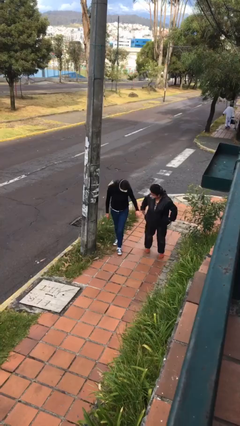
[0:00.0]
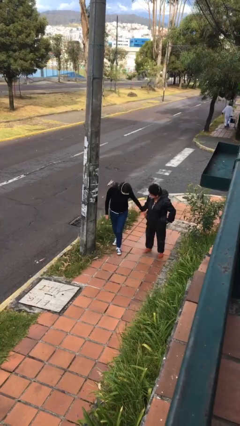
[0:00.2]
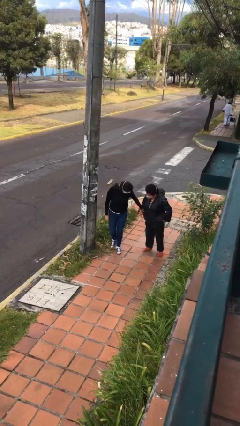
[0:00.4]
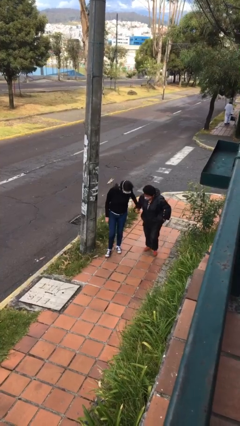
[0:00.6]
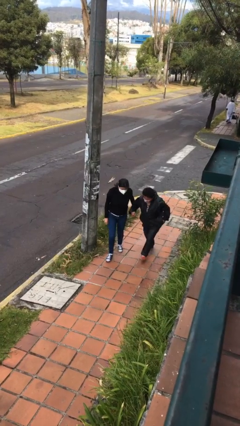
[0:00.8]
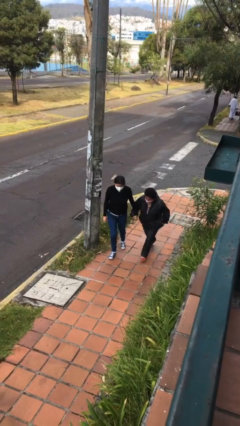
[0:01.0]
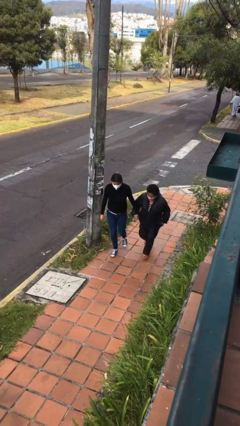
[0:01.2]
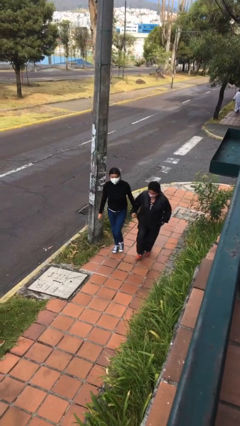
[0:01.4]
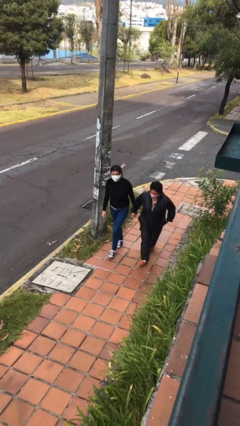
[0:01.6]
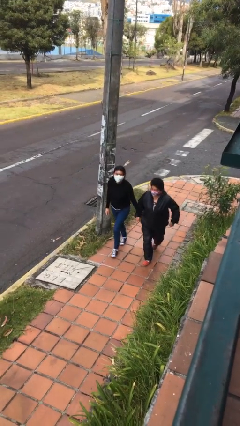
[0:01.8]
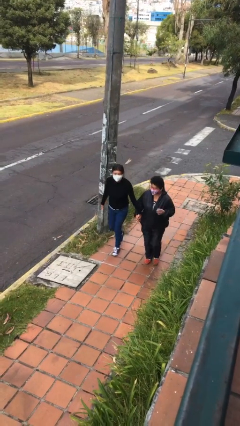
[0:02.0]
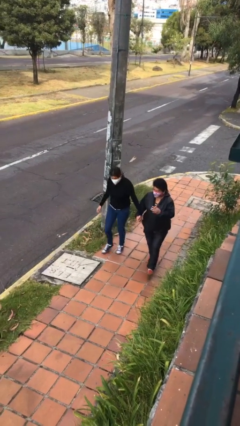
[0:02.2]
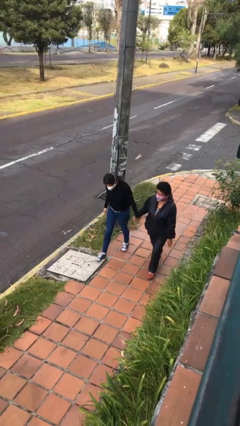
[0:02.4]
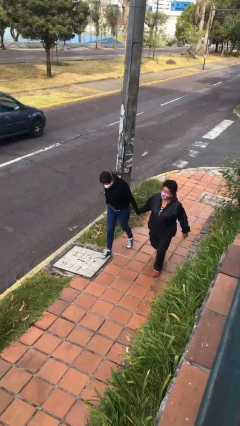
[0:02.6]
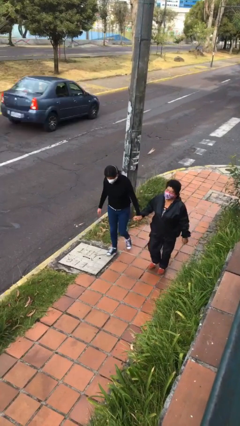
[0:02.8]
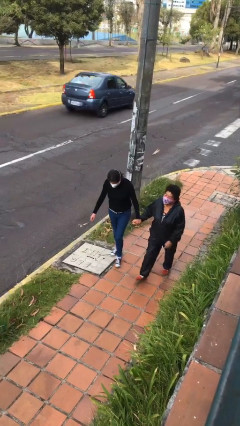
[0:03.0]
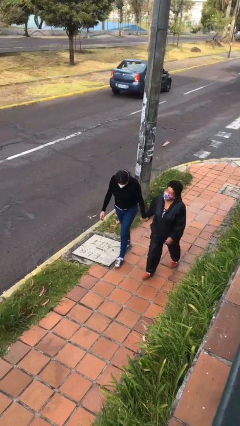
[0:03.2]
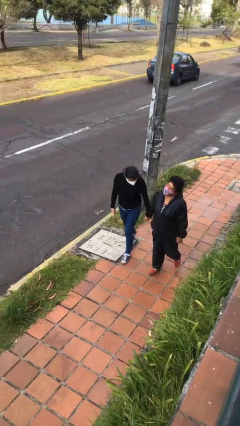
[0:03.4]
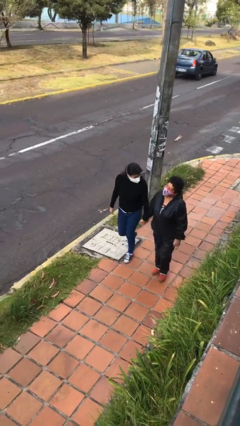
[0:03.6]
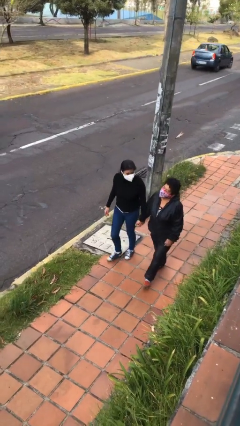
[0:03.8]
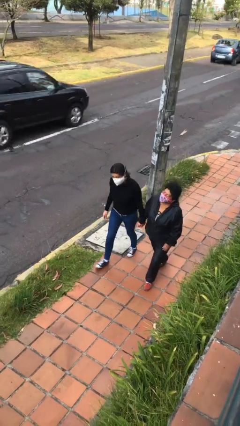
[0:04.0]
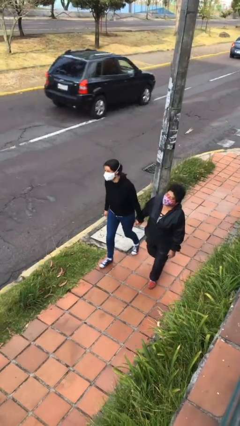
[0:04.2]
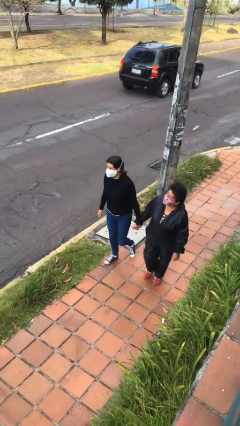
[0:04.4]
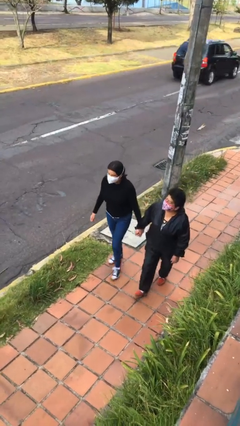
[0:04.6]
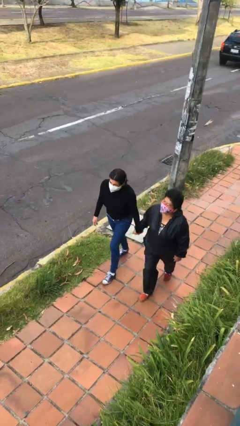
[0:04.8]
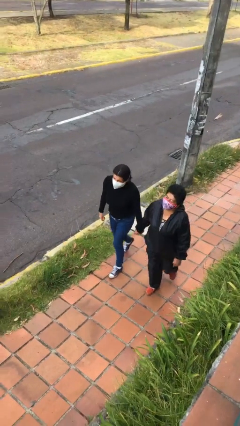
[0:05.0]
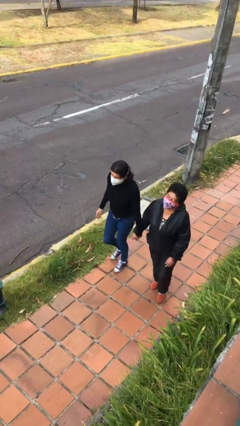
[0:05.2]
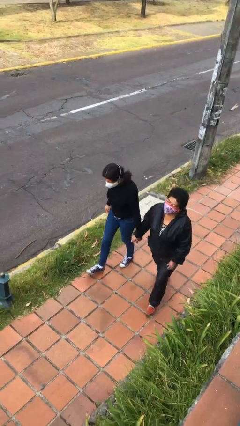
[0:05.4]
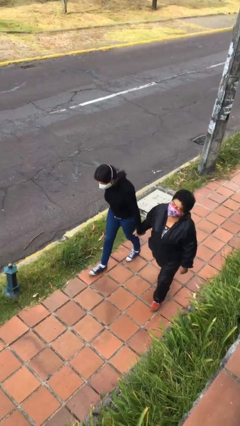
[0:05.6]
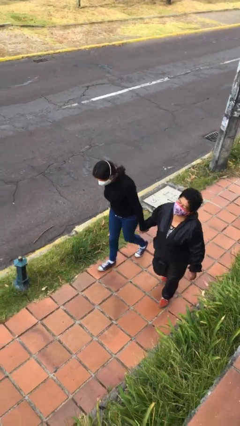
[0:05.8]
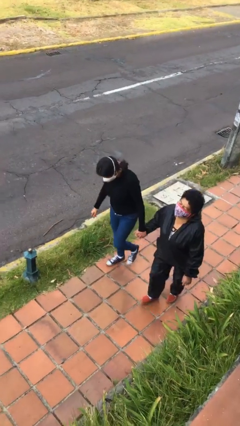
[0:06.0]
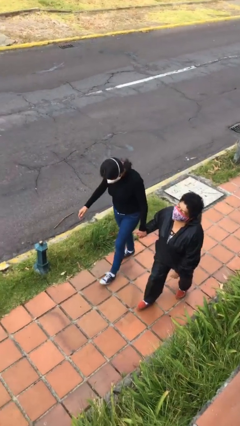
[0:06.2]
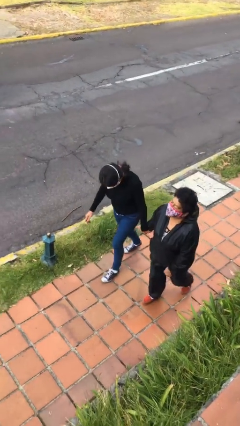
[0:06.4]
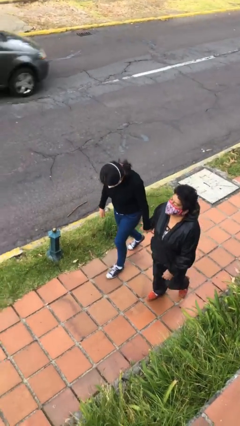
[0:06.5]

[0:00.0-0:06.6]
person holds hand

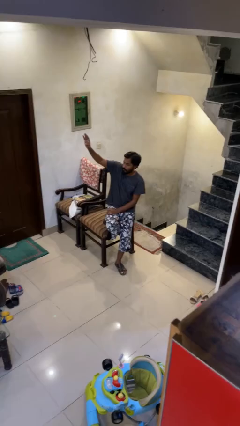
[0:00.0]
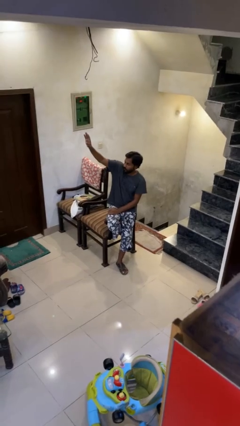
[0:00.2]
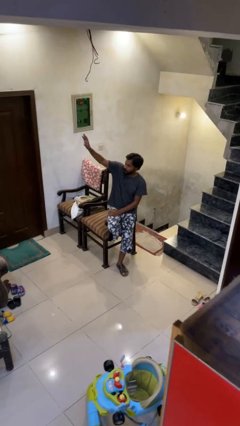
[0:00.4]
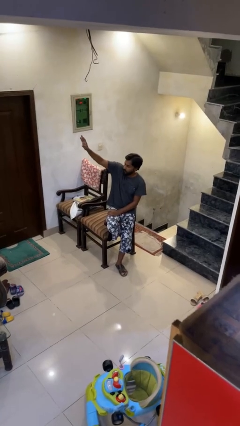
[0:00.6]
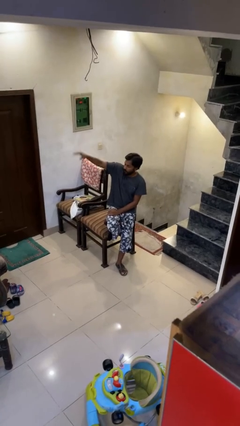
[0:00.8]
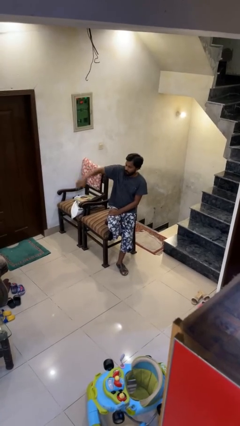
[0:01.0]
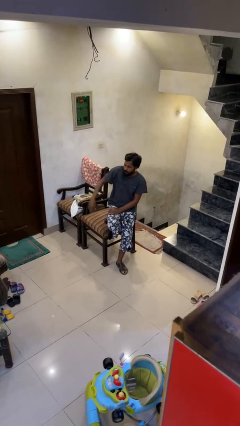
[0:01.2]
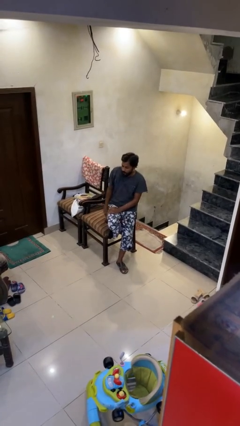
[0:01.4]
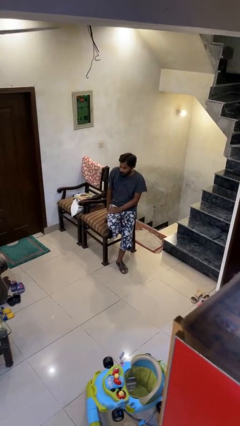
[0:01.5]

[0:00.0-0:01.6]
person gestures lower hand

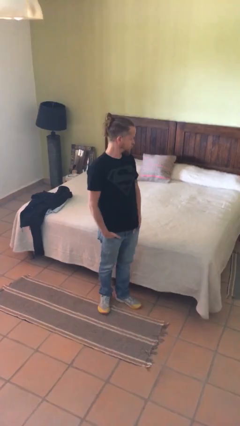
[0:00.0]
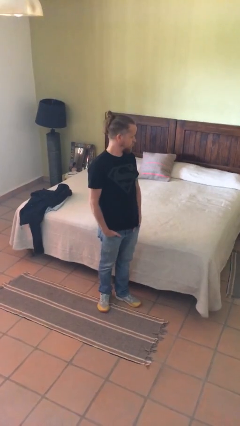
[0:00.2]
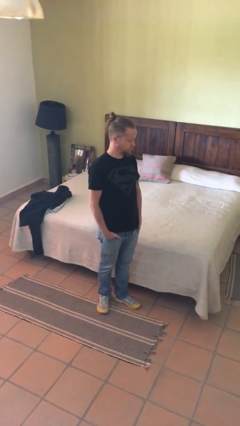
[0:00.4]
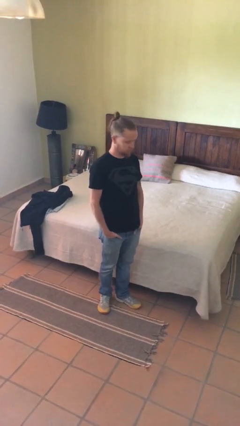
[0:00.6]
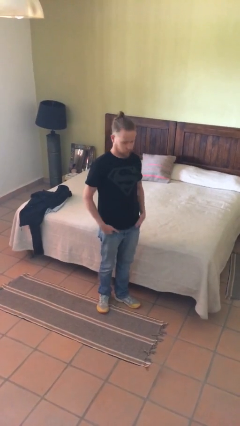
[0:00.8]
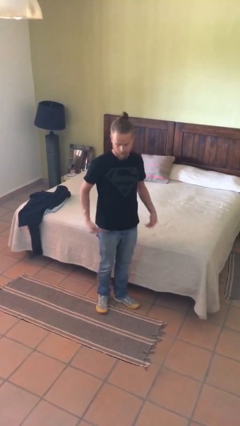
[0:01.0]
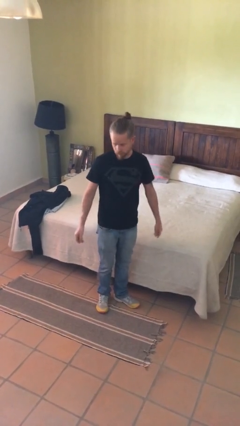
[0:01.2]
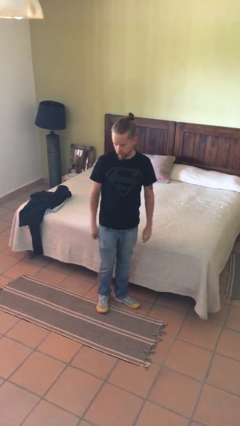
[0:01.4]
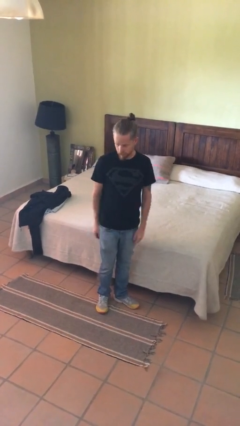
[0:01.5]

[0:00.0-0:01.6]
person puts hands in back pockets

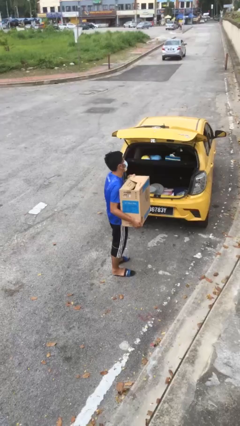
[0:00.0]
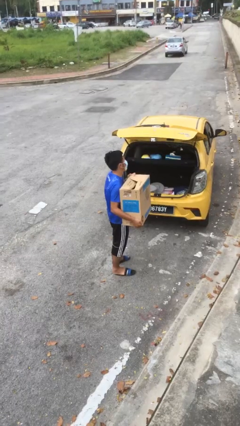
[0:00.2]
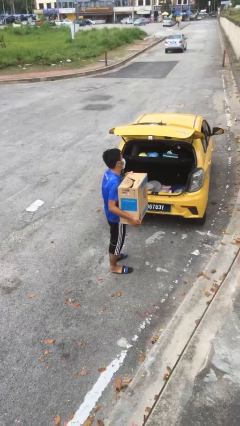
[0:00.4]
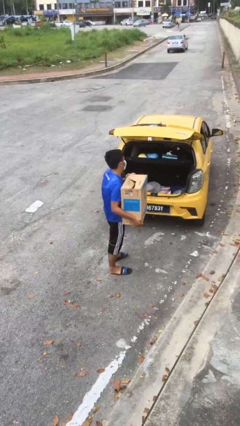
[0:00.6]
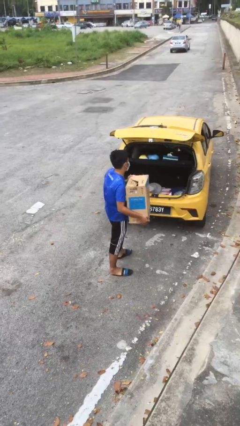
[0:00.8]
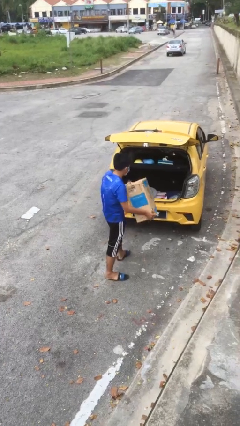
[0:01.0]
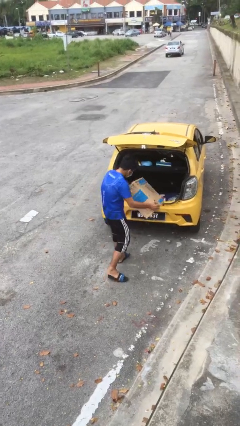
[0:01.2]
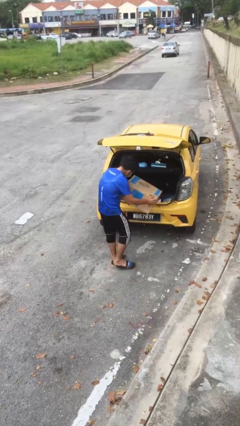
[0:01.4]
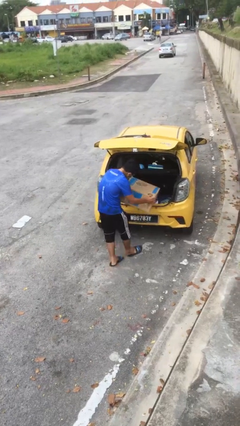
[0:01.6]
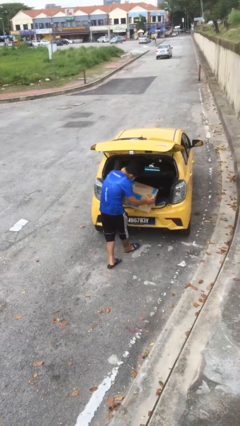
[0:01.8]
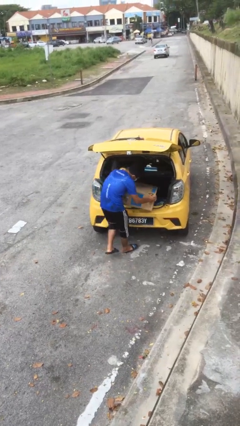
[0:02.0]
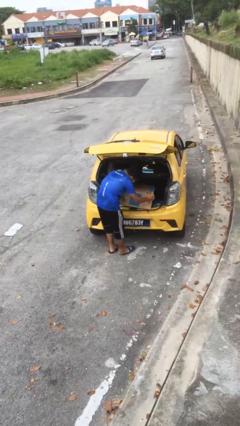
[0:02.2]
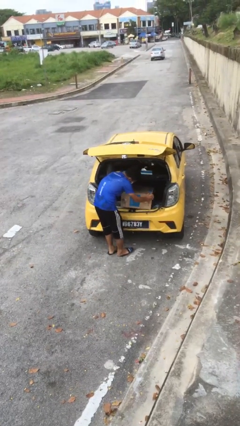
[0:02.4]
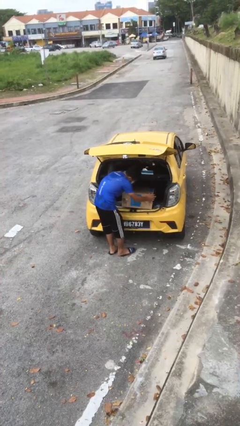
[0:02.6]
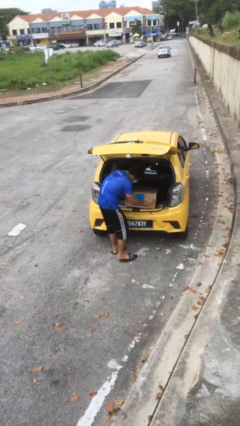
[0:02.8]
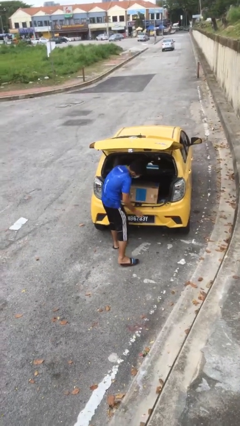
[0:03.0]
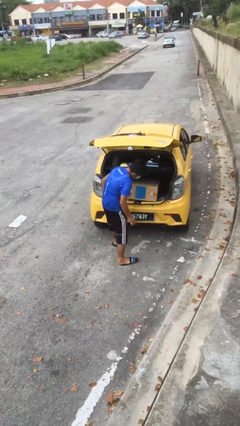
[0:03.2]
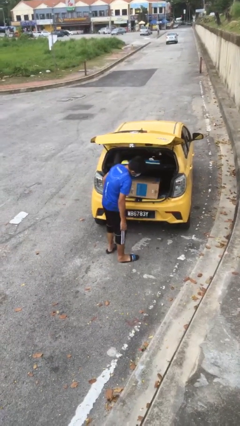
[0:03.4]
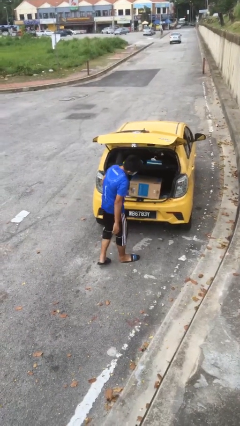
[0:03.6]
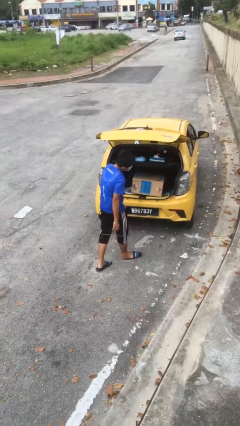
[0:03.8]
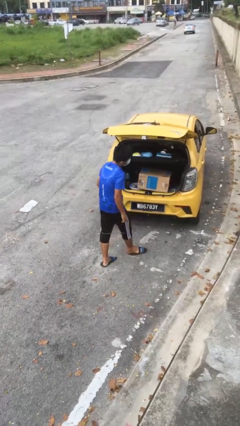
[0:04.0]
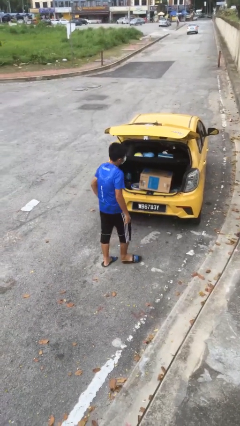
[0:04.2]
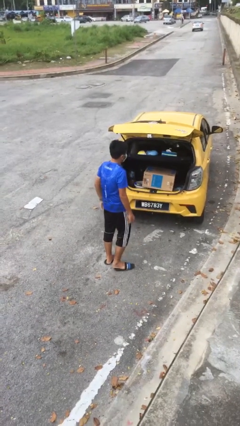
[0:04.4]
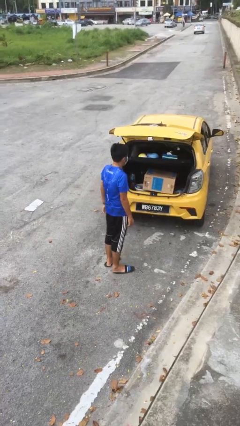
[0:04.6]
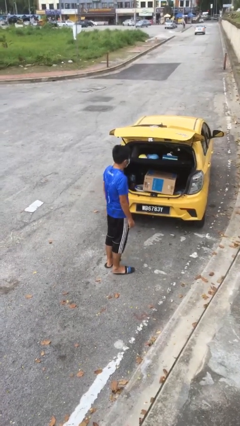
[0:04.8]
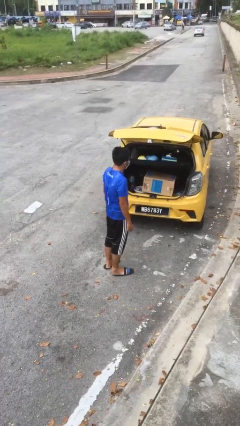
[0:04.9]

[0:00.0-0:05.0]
person loads car

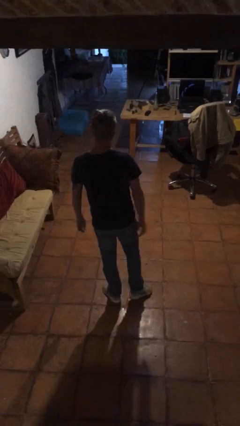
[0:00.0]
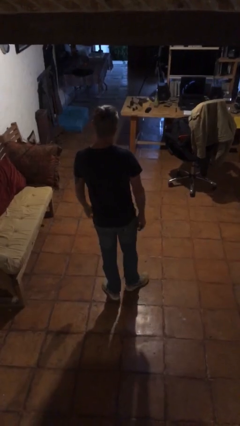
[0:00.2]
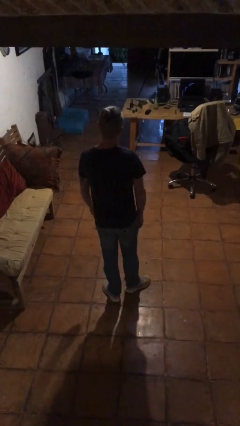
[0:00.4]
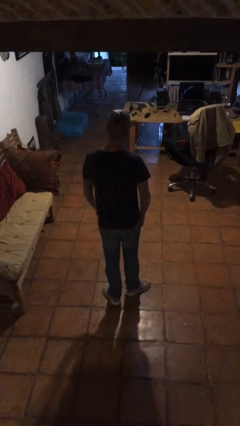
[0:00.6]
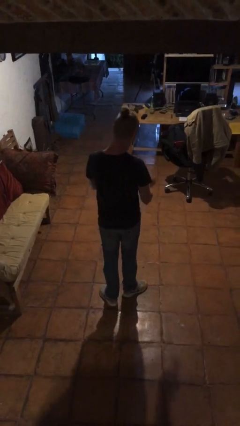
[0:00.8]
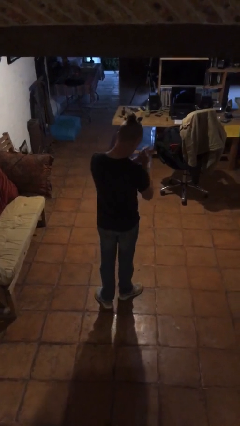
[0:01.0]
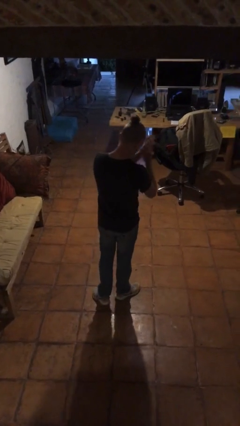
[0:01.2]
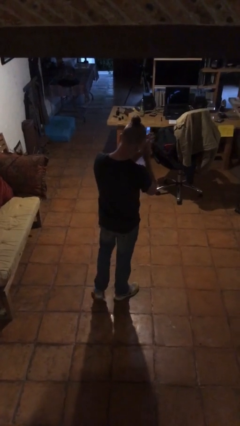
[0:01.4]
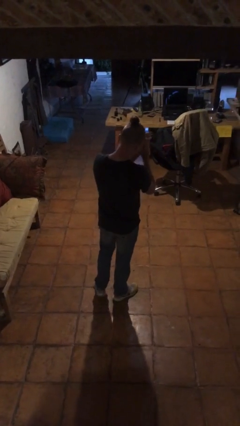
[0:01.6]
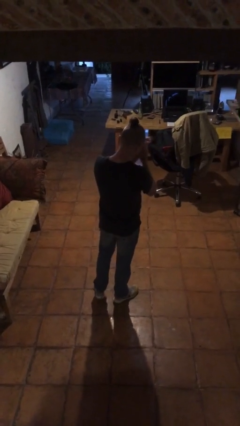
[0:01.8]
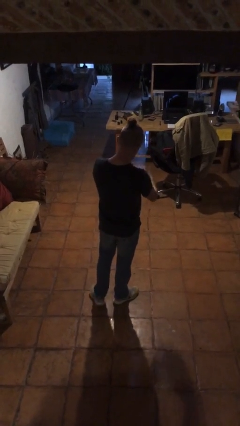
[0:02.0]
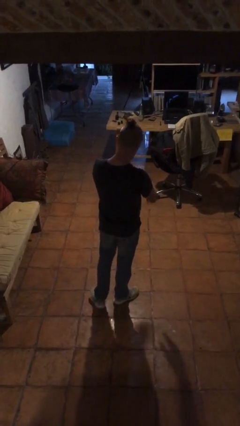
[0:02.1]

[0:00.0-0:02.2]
person claps hands

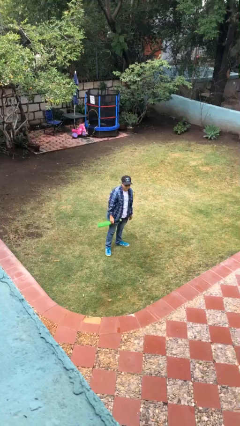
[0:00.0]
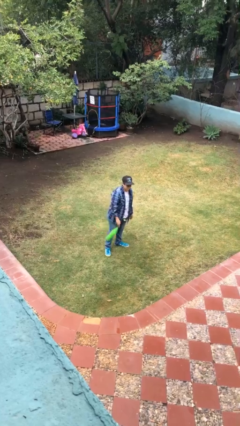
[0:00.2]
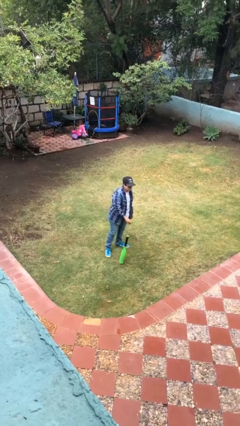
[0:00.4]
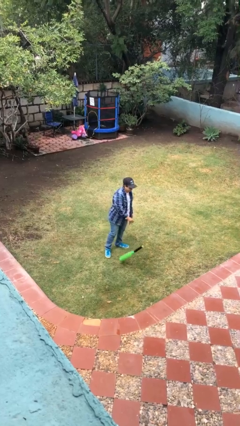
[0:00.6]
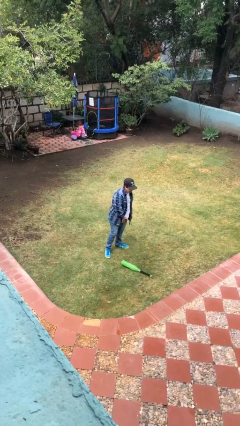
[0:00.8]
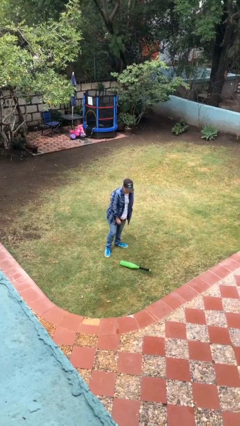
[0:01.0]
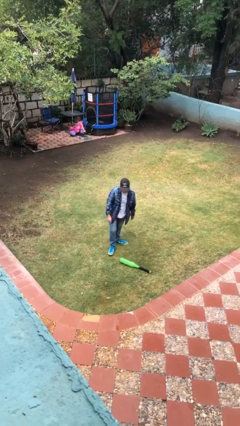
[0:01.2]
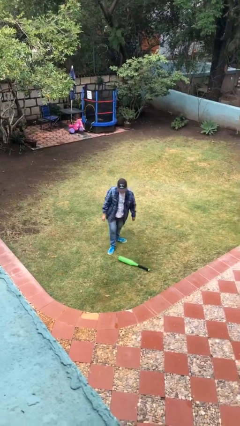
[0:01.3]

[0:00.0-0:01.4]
person drops object
